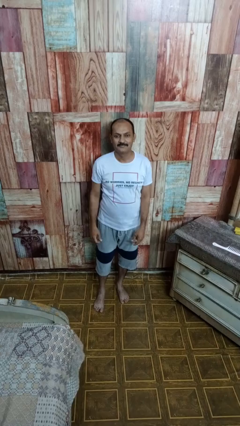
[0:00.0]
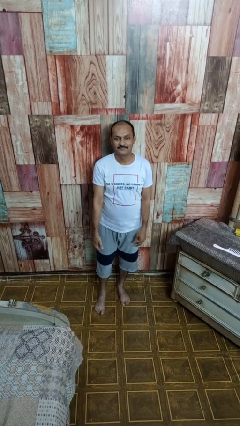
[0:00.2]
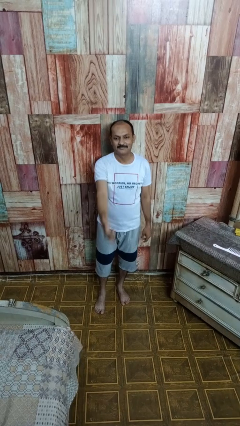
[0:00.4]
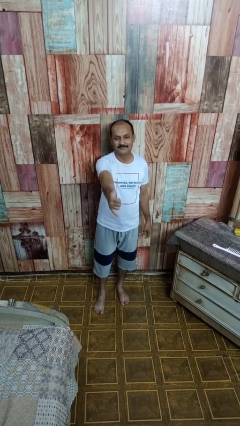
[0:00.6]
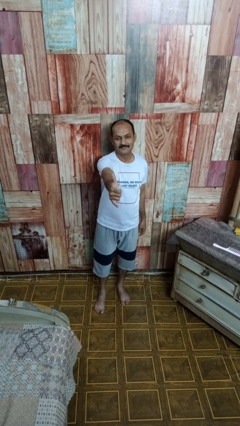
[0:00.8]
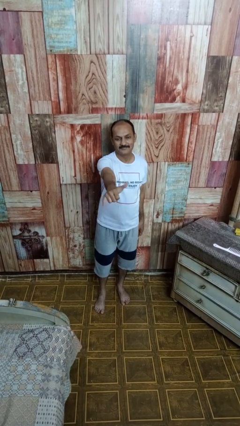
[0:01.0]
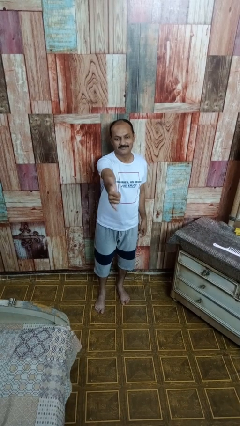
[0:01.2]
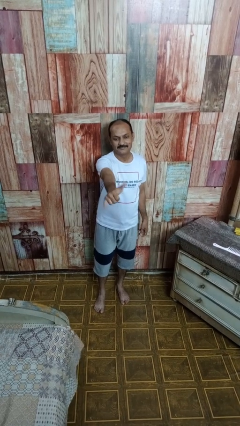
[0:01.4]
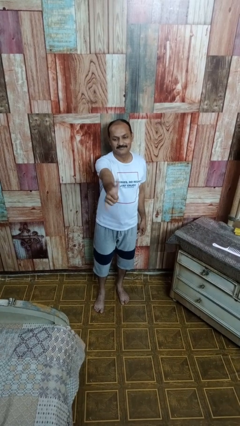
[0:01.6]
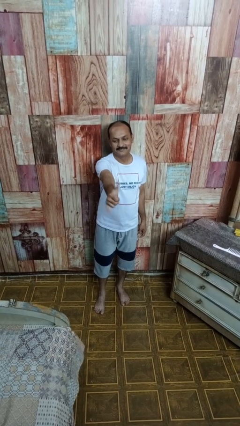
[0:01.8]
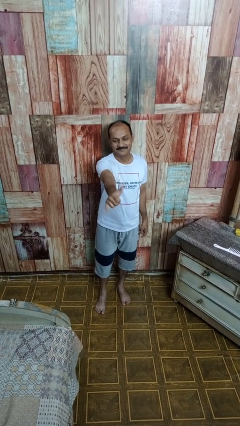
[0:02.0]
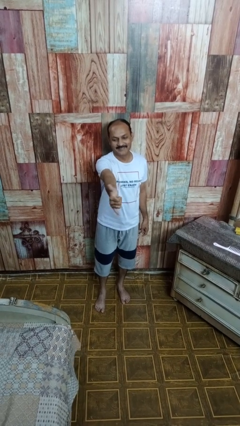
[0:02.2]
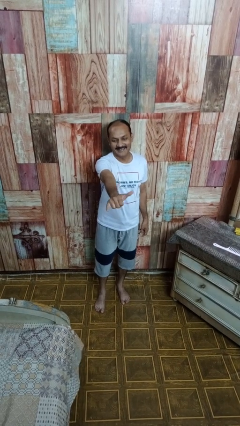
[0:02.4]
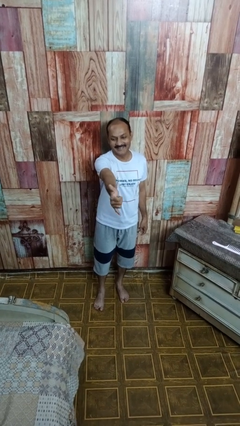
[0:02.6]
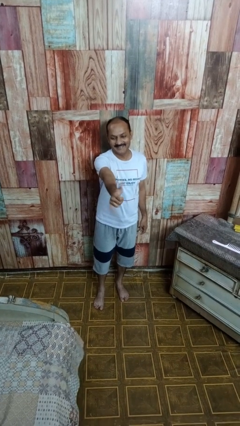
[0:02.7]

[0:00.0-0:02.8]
person gestures hang loose

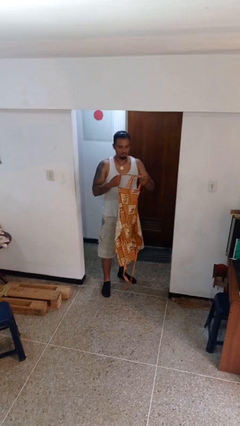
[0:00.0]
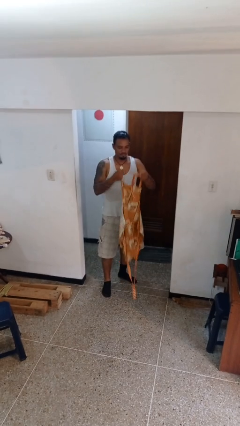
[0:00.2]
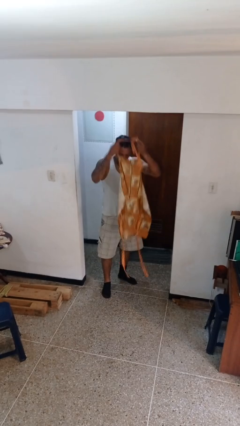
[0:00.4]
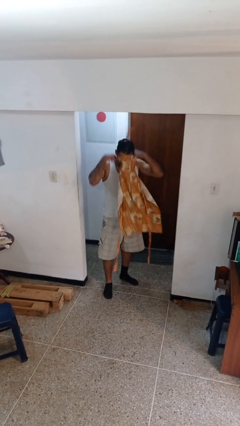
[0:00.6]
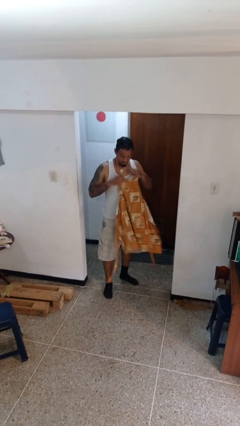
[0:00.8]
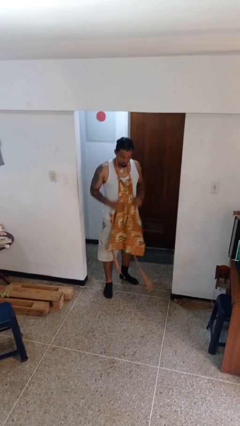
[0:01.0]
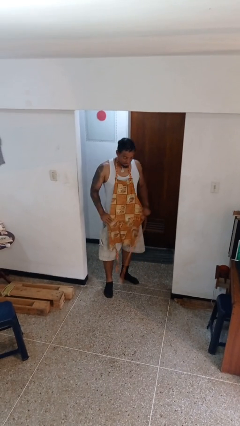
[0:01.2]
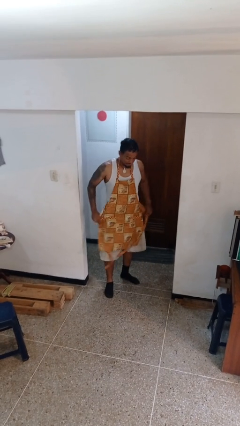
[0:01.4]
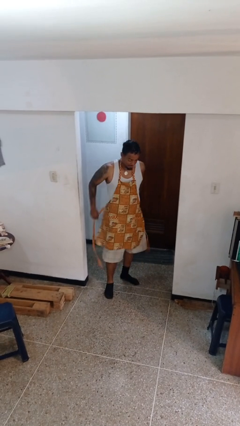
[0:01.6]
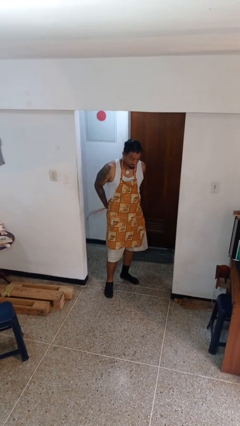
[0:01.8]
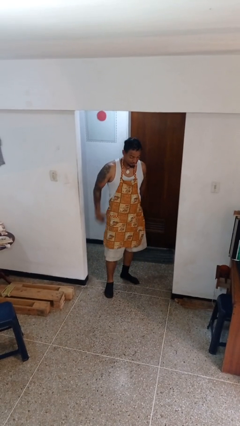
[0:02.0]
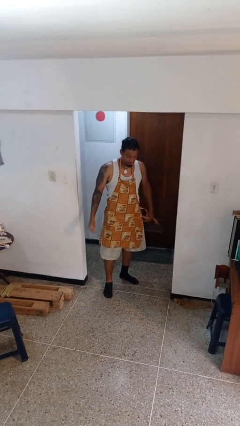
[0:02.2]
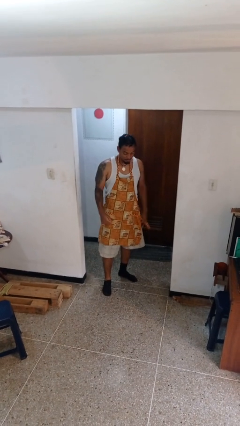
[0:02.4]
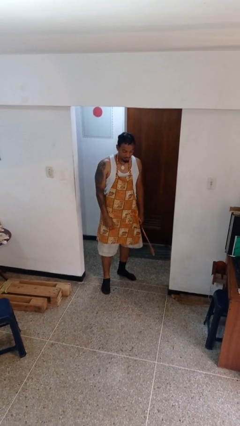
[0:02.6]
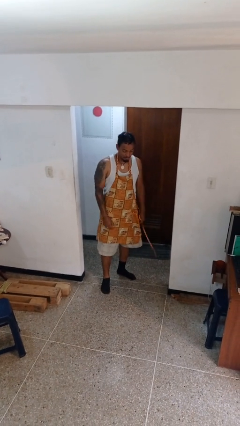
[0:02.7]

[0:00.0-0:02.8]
person puts on apron

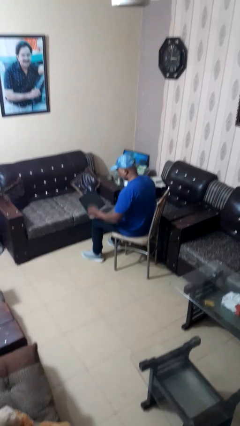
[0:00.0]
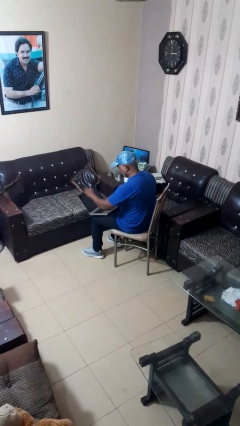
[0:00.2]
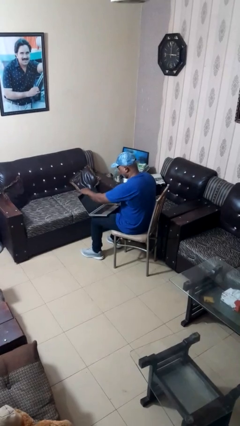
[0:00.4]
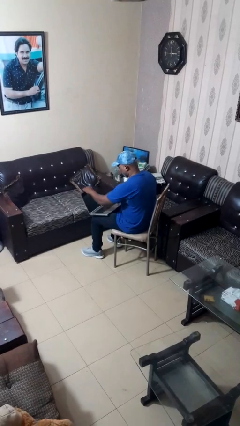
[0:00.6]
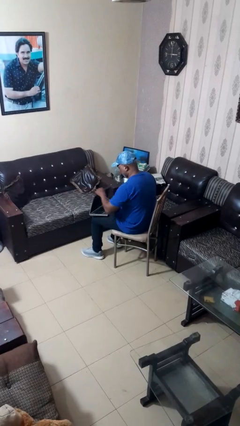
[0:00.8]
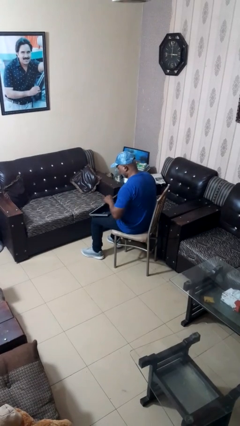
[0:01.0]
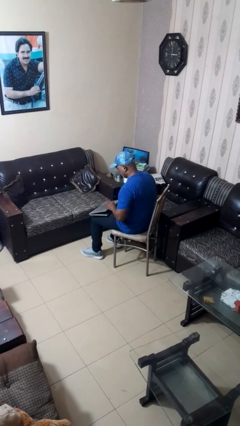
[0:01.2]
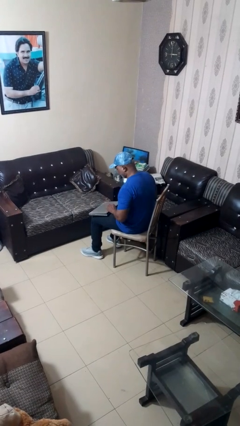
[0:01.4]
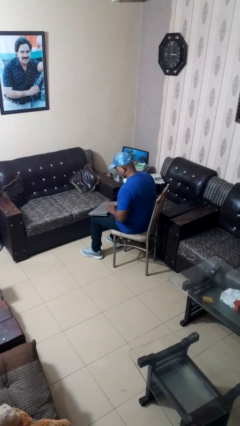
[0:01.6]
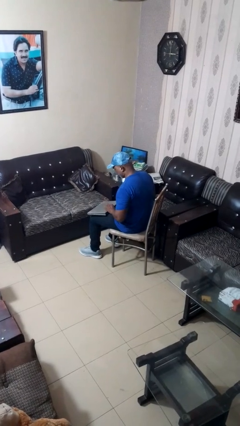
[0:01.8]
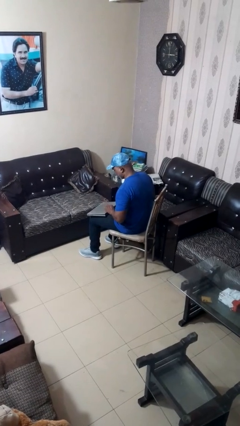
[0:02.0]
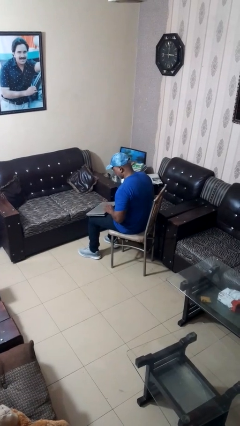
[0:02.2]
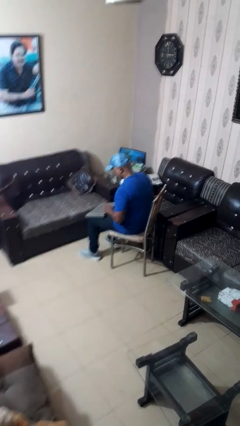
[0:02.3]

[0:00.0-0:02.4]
person closes laptop

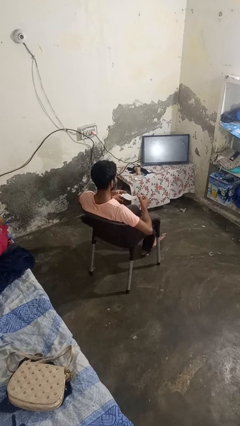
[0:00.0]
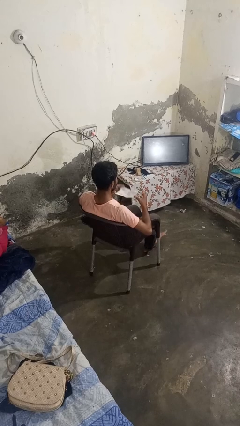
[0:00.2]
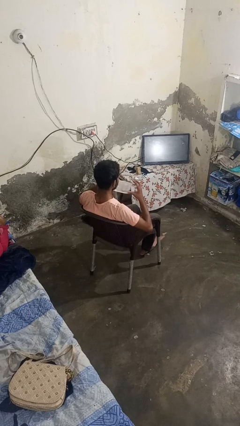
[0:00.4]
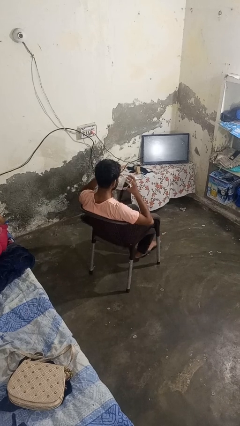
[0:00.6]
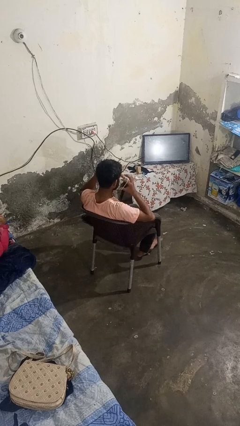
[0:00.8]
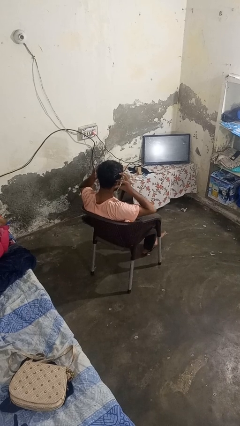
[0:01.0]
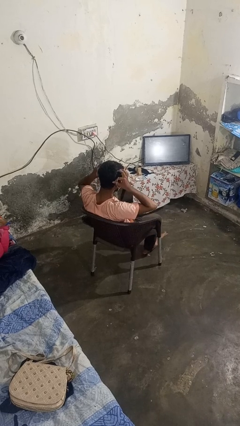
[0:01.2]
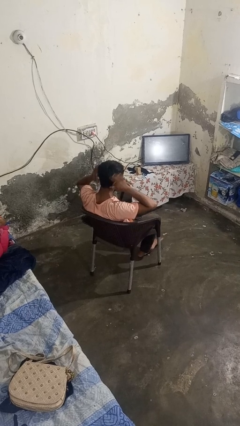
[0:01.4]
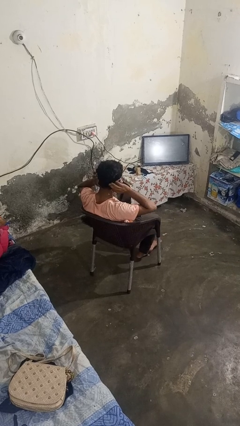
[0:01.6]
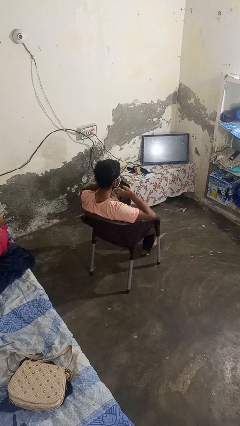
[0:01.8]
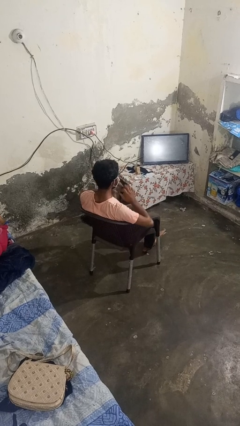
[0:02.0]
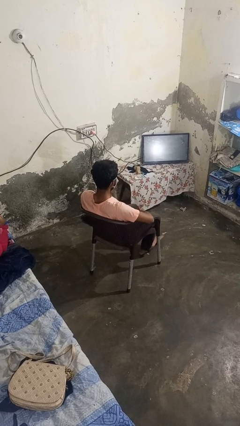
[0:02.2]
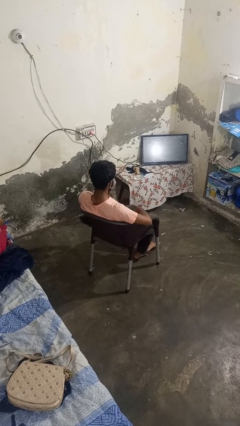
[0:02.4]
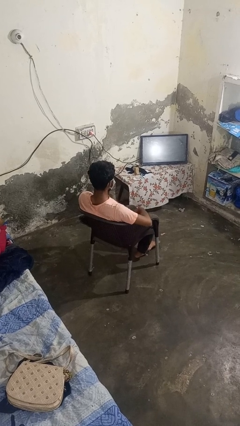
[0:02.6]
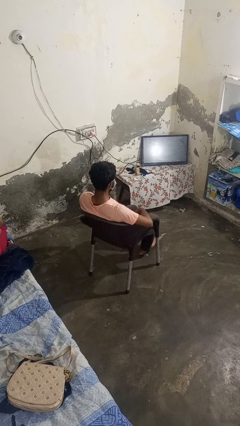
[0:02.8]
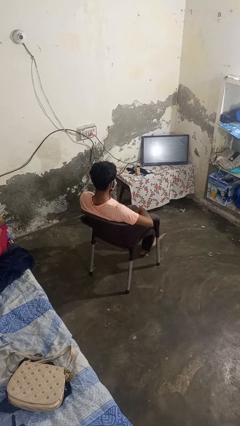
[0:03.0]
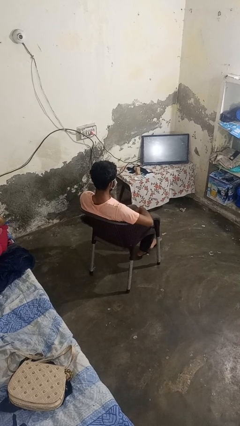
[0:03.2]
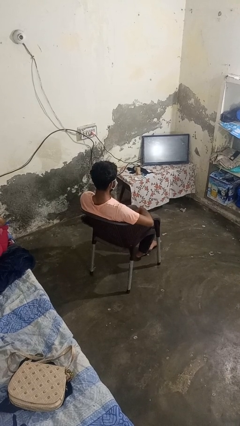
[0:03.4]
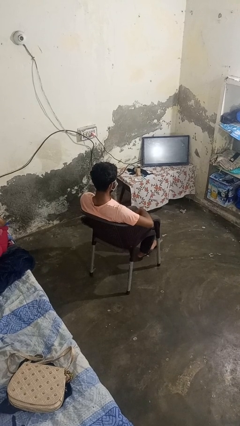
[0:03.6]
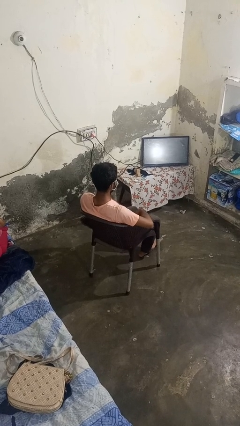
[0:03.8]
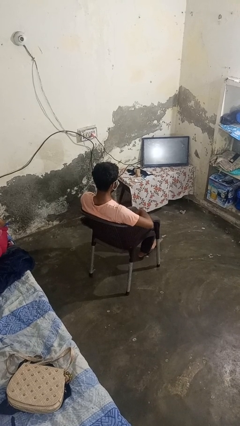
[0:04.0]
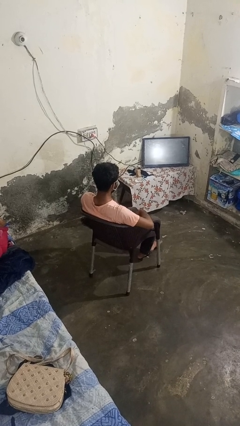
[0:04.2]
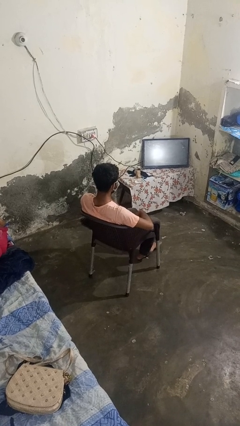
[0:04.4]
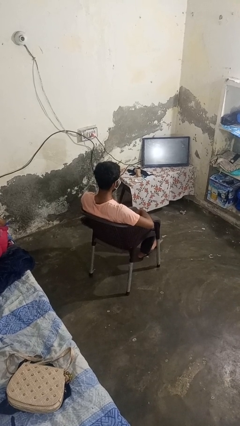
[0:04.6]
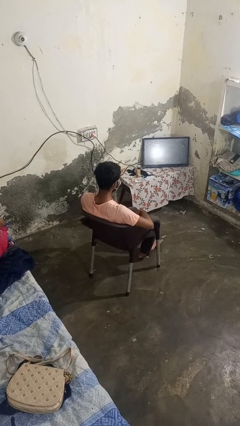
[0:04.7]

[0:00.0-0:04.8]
person puts on facemask

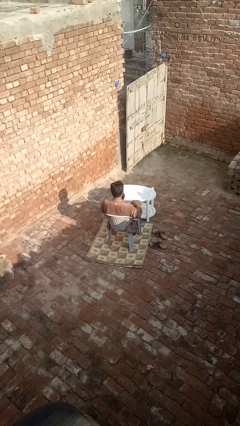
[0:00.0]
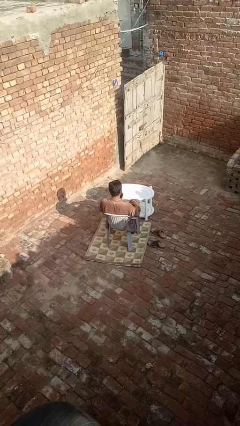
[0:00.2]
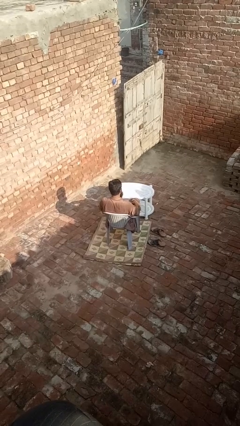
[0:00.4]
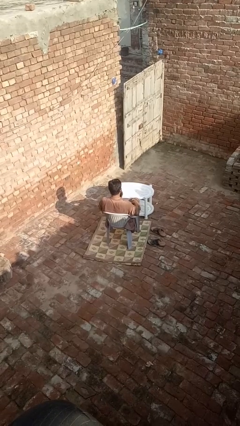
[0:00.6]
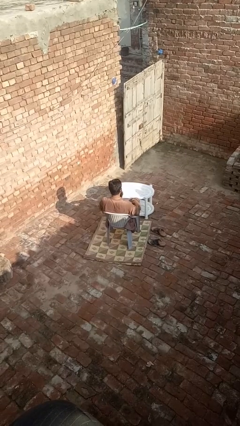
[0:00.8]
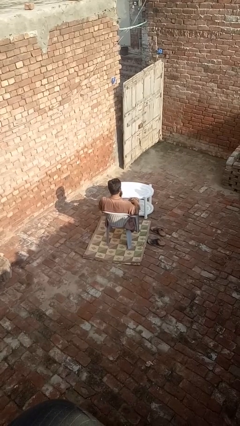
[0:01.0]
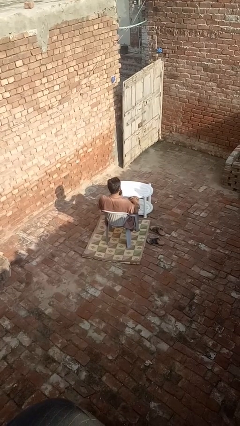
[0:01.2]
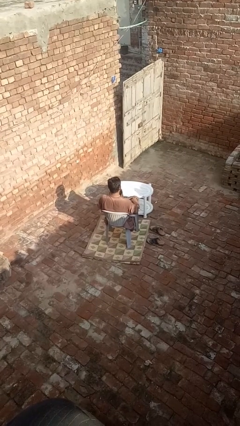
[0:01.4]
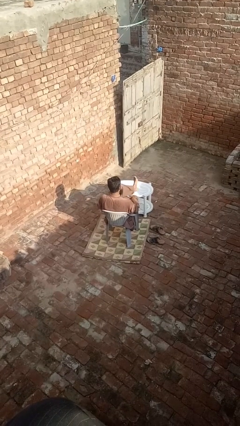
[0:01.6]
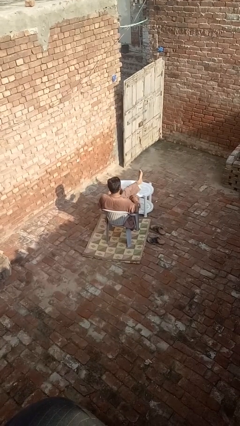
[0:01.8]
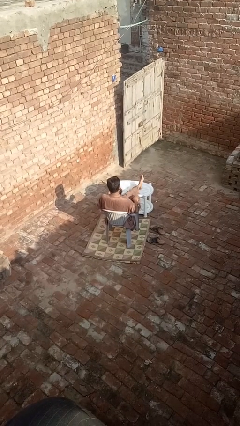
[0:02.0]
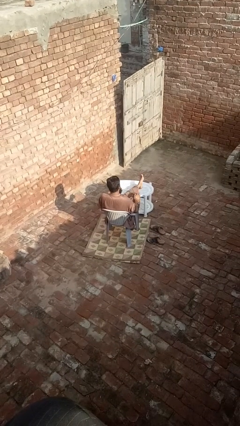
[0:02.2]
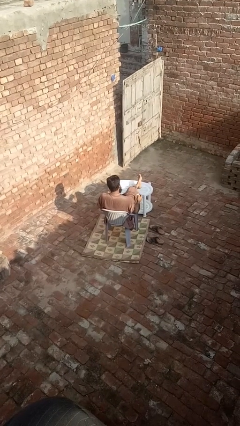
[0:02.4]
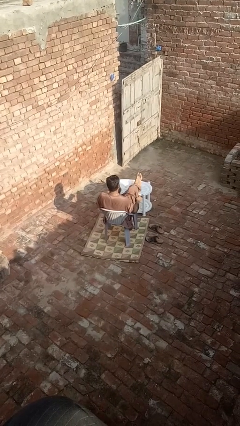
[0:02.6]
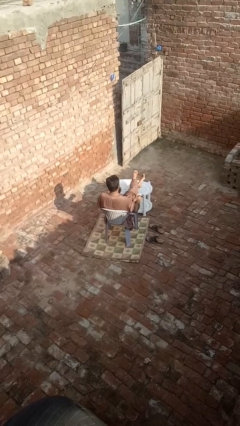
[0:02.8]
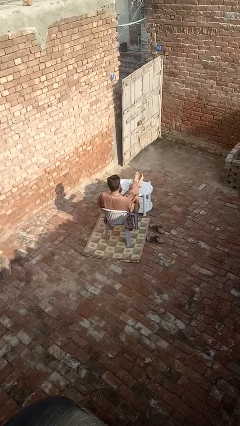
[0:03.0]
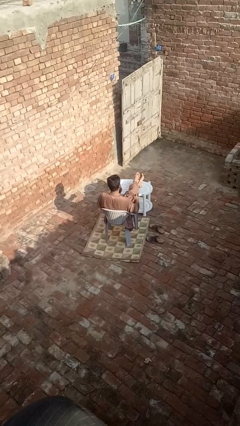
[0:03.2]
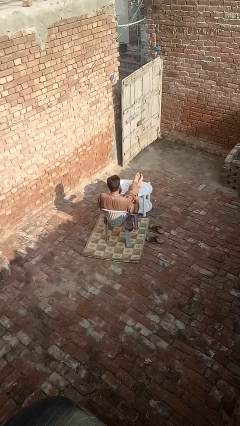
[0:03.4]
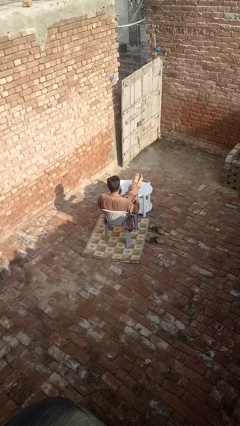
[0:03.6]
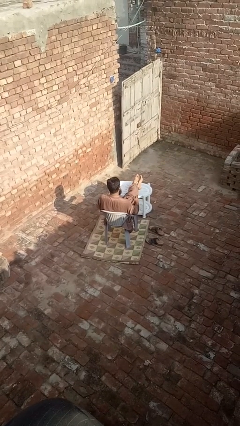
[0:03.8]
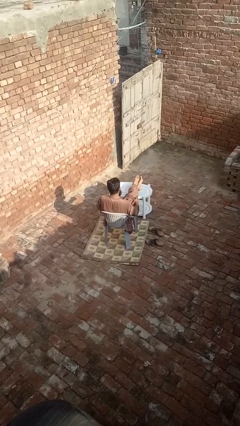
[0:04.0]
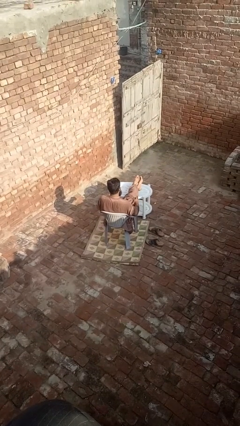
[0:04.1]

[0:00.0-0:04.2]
person puts feet up
